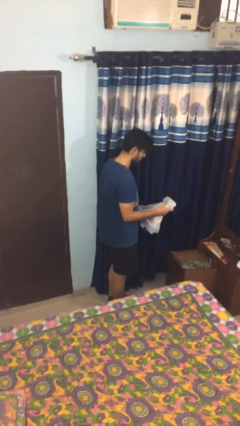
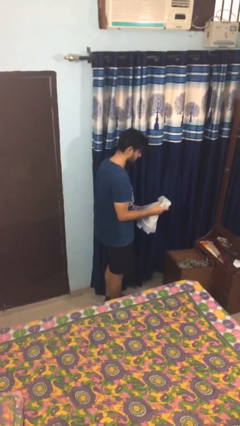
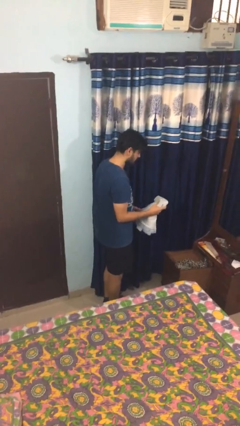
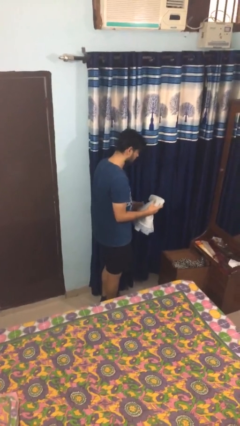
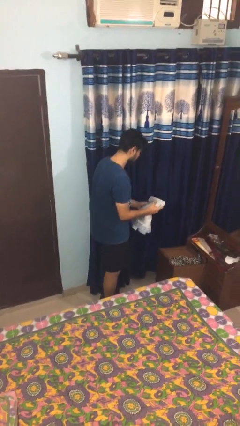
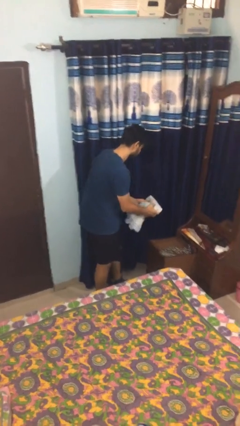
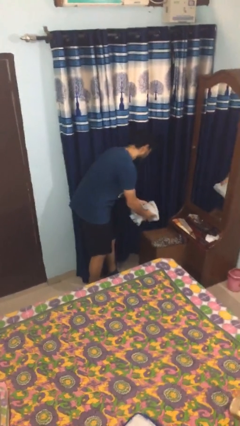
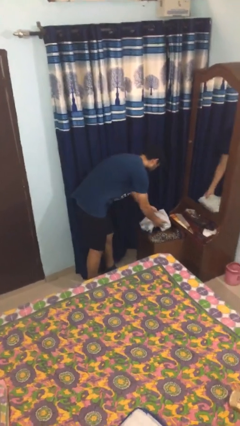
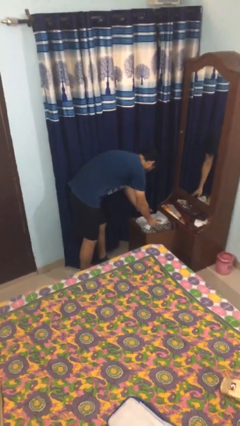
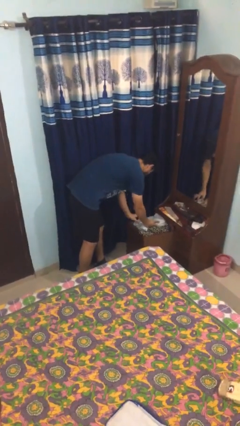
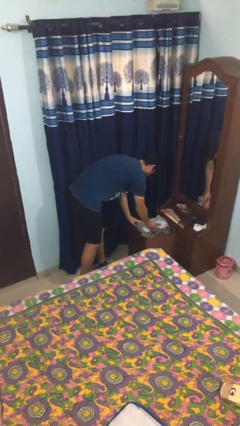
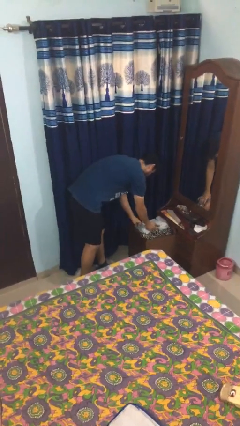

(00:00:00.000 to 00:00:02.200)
person puts clothes into dresser

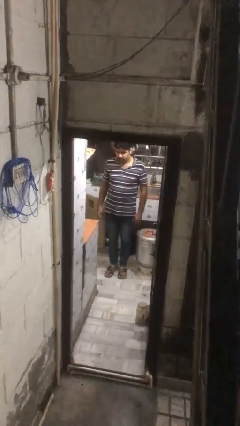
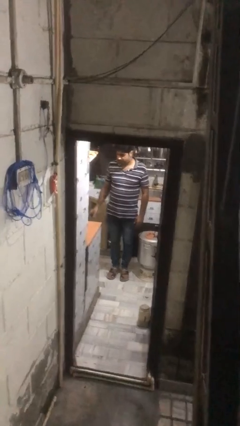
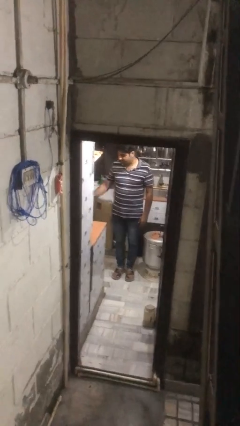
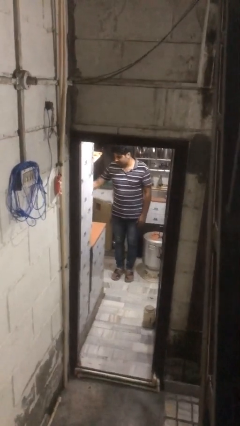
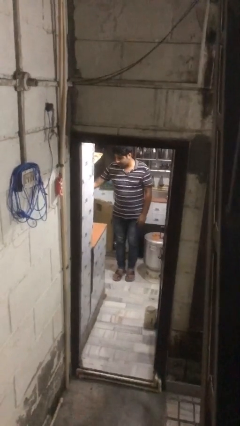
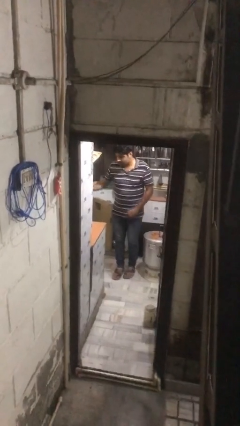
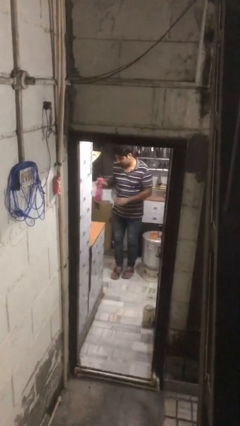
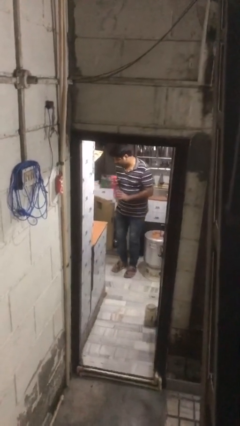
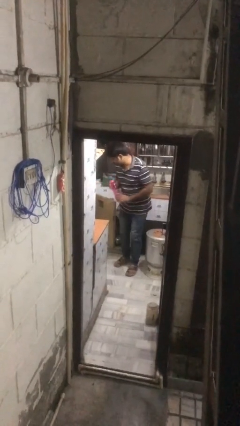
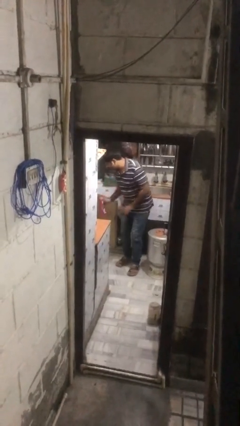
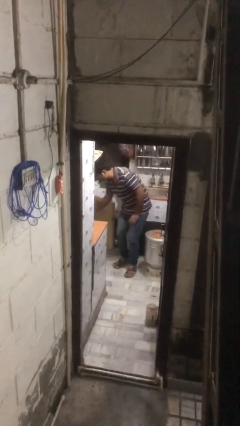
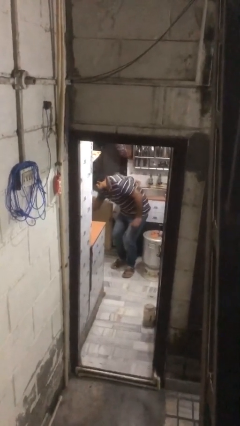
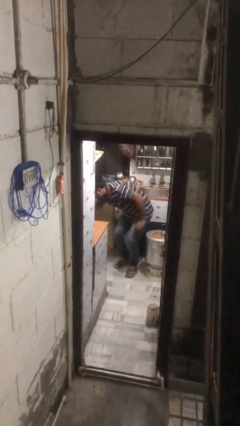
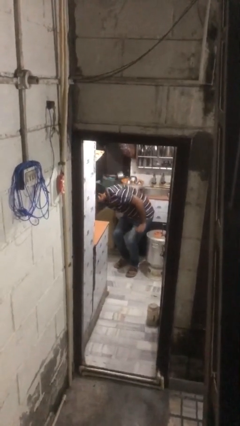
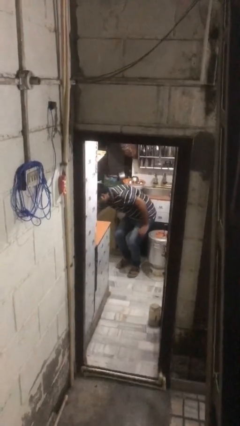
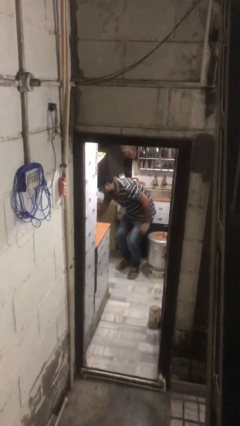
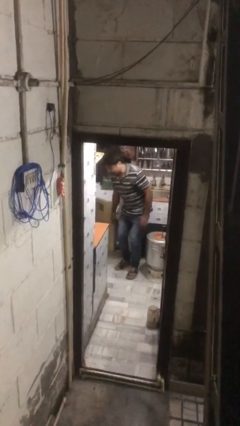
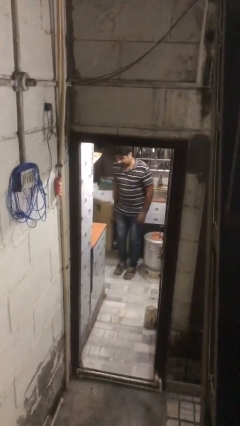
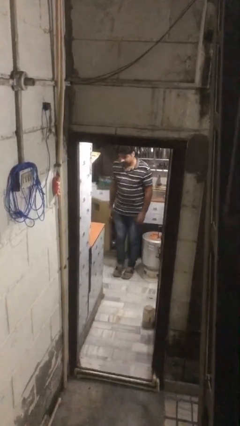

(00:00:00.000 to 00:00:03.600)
person puts object in cabinet

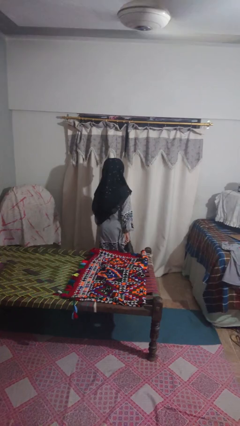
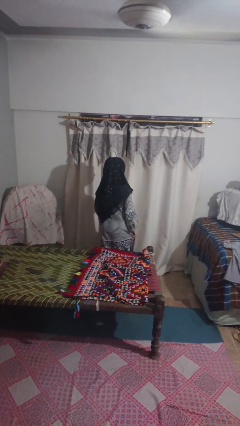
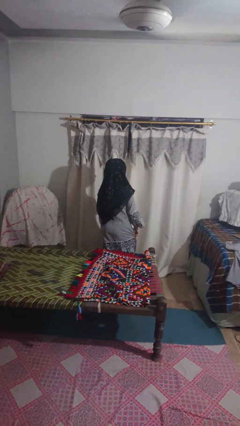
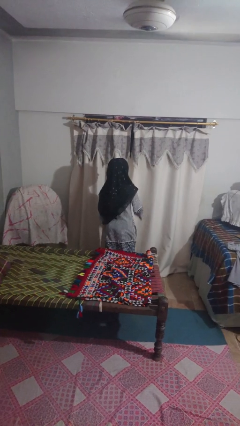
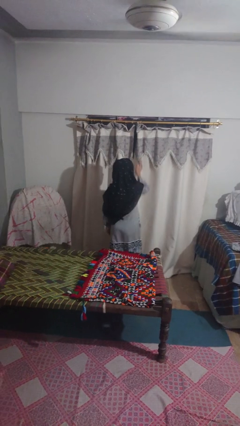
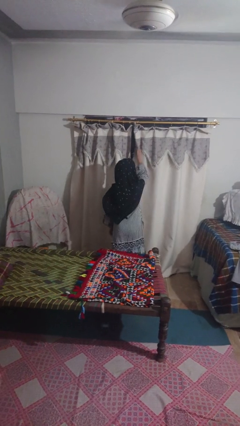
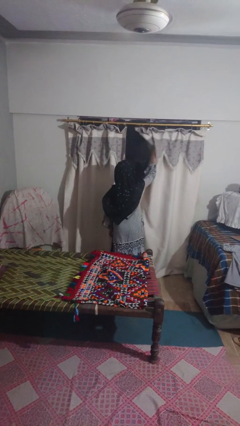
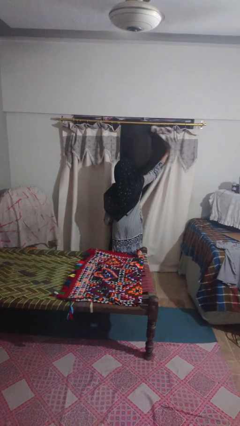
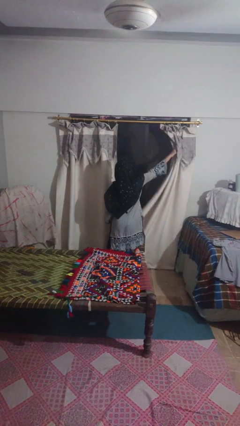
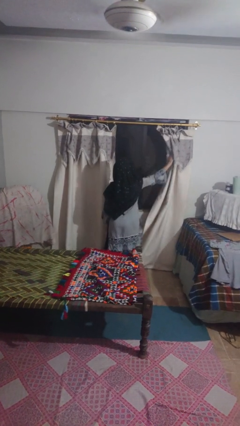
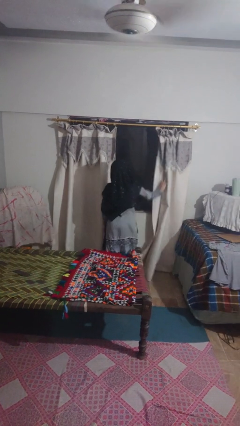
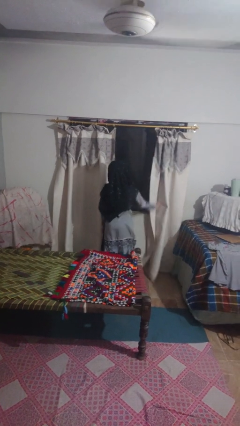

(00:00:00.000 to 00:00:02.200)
person opens curtains

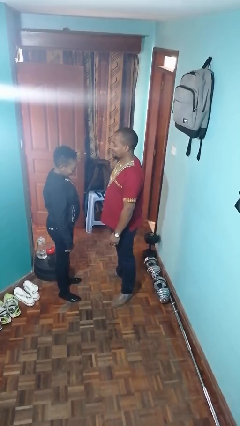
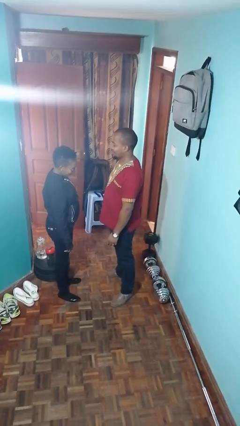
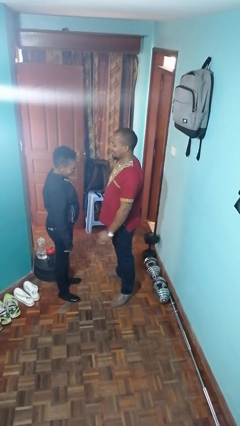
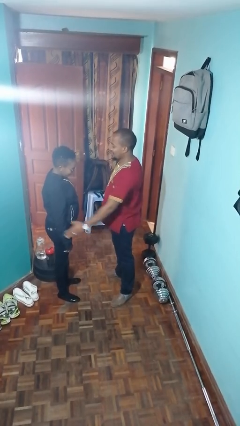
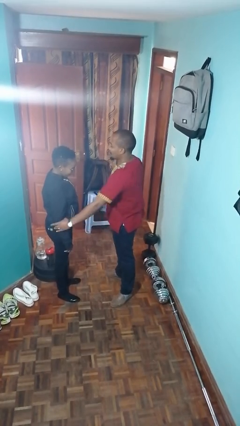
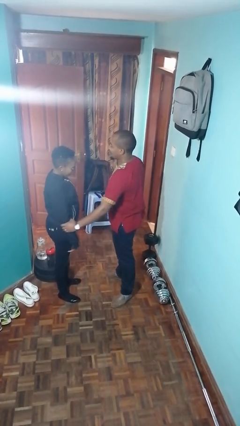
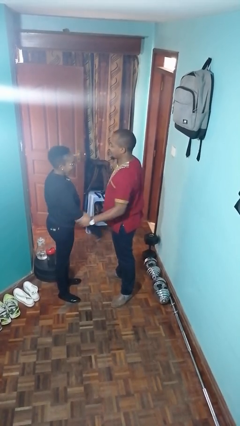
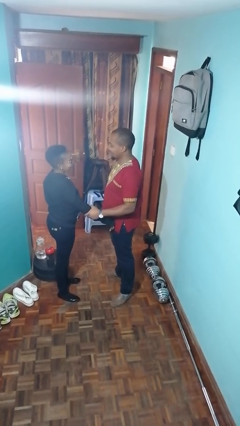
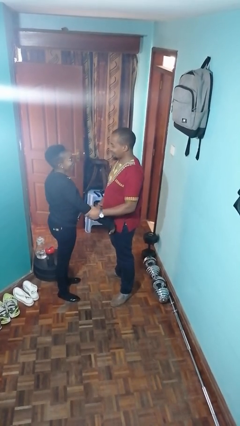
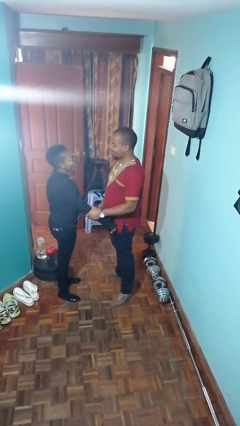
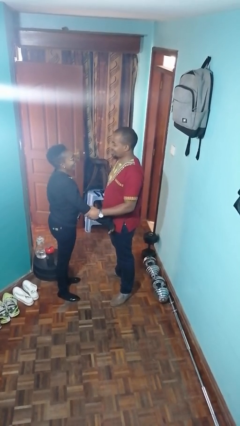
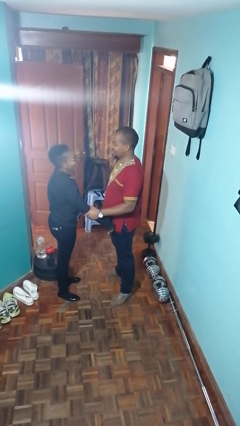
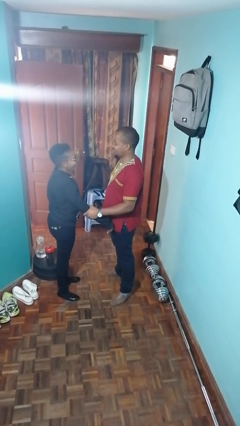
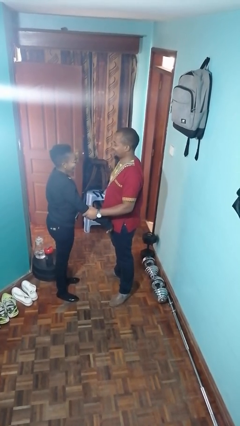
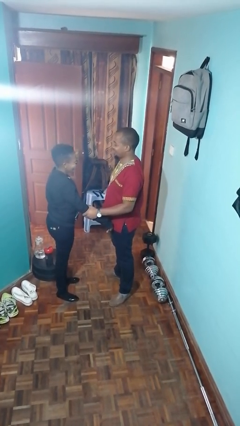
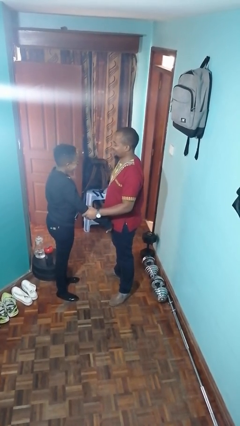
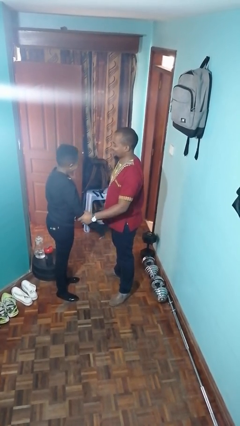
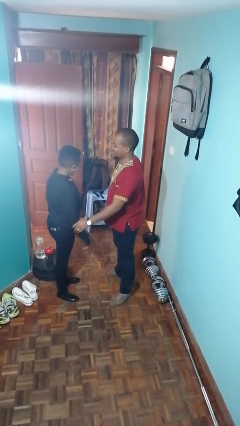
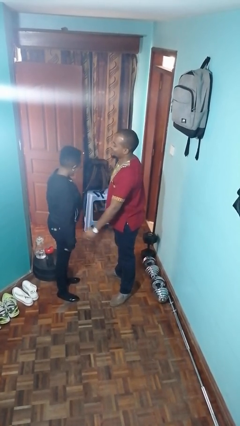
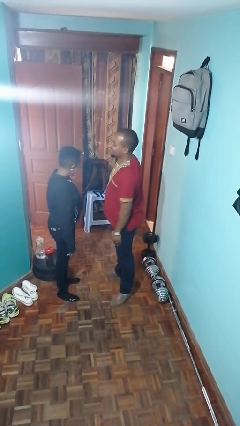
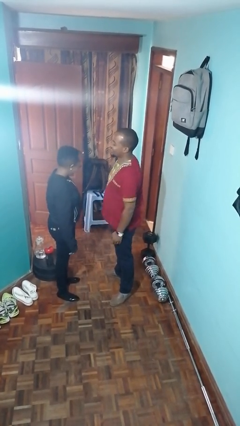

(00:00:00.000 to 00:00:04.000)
person grabs person by forearm

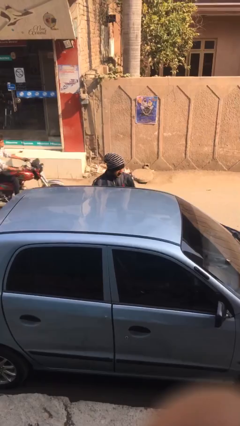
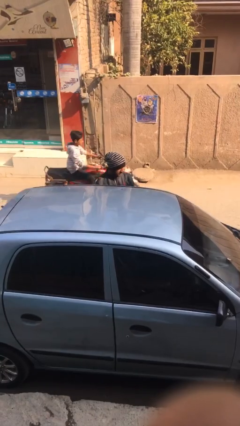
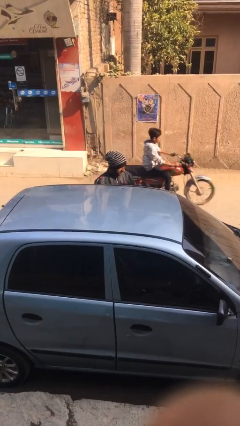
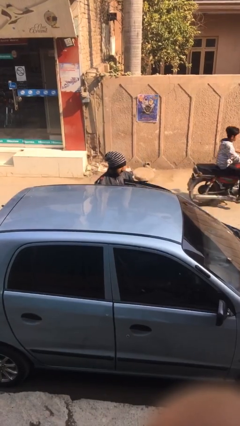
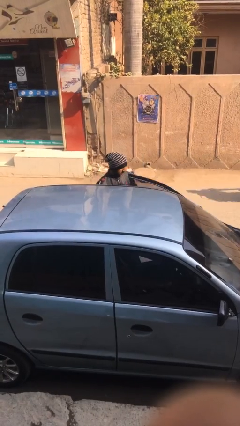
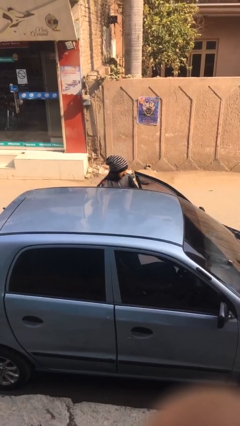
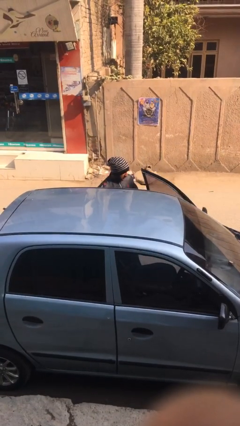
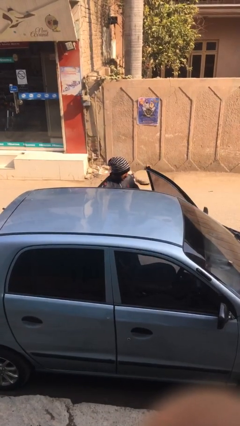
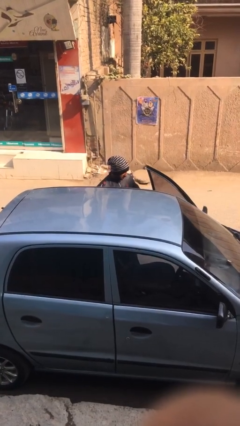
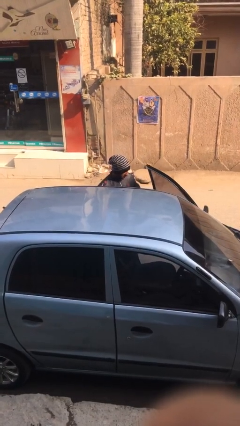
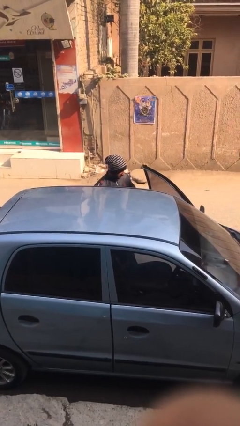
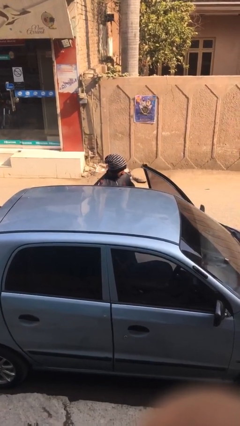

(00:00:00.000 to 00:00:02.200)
person opens car door

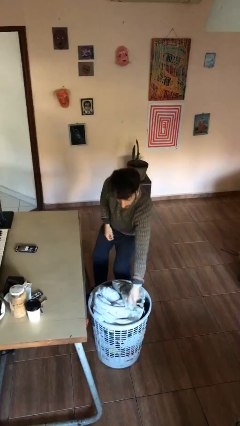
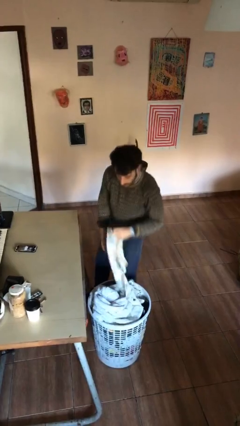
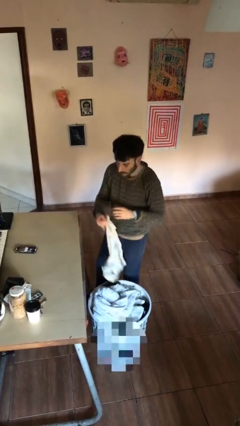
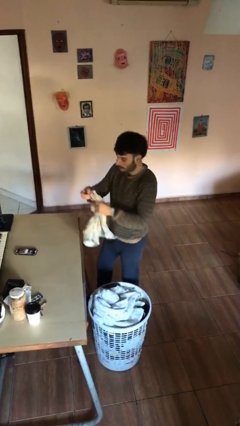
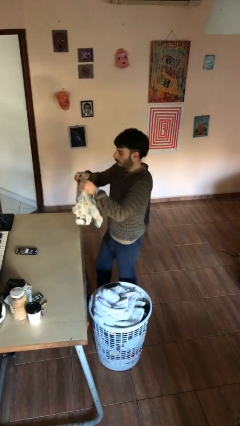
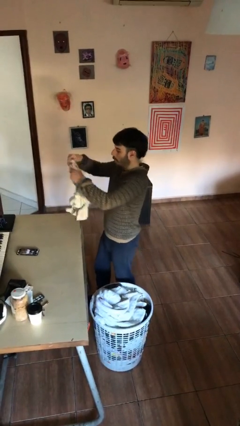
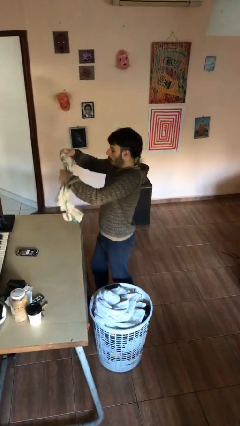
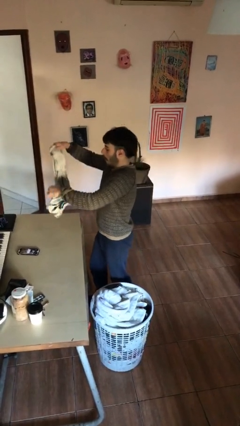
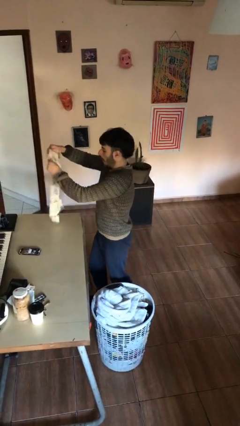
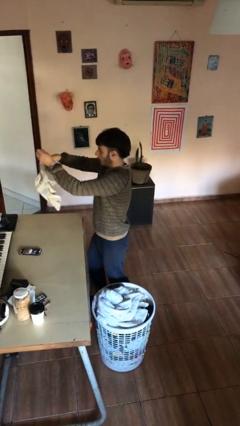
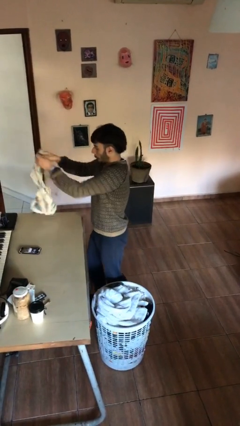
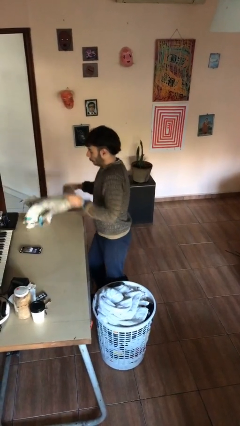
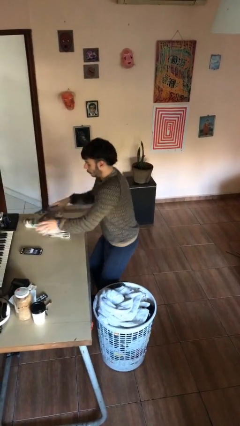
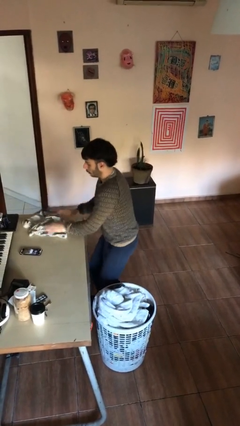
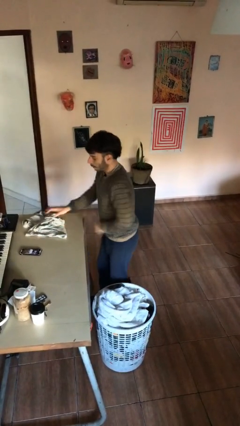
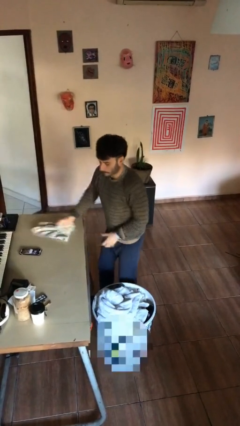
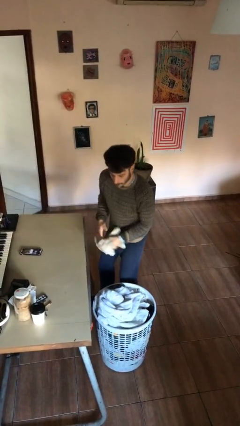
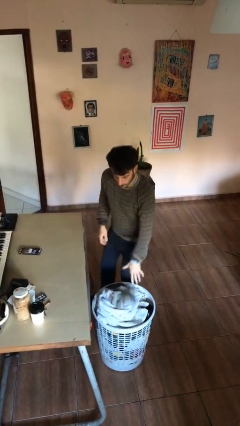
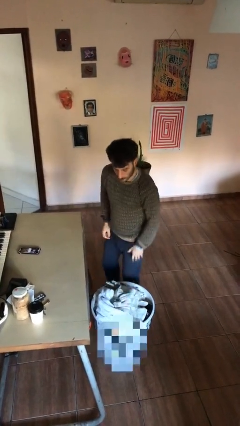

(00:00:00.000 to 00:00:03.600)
person folds shirt
